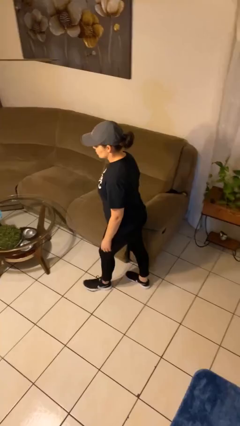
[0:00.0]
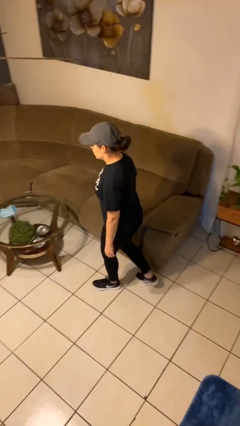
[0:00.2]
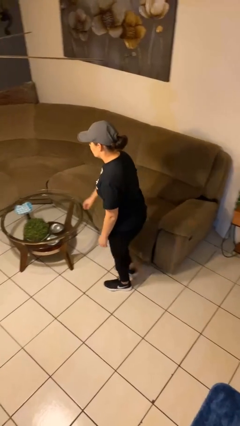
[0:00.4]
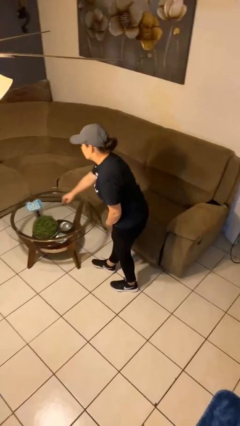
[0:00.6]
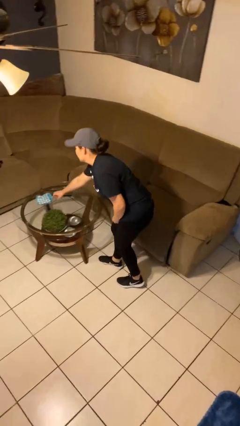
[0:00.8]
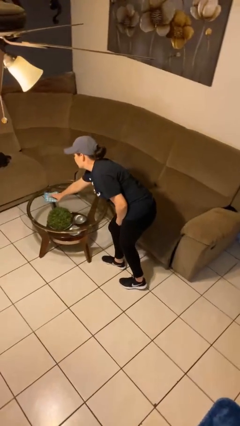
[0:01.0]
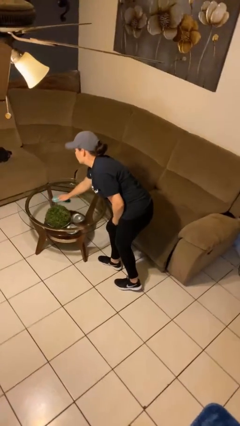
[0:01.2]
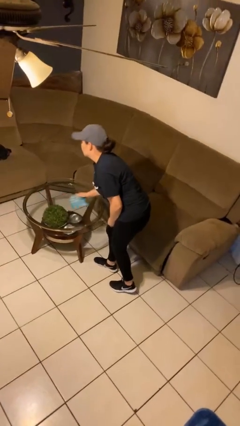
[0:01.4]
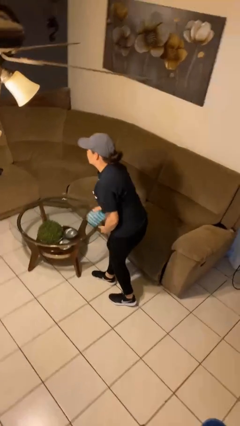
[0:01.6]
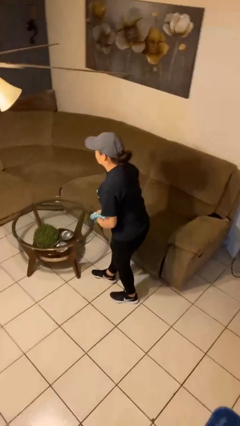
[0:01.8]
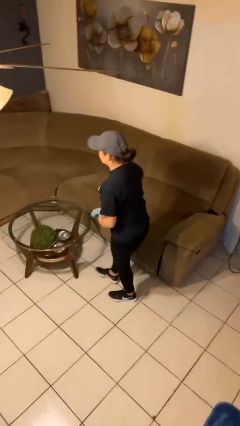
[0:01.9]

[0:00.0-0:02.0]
person picks up object from table

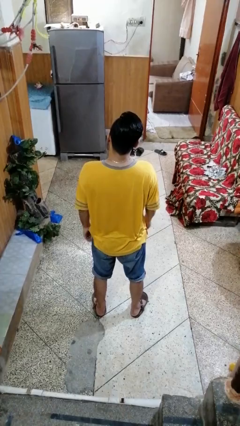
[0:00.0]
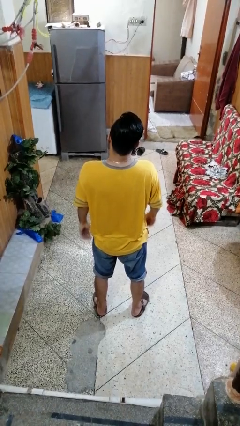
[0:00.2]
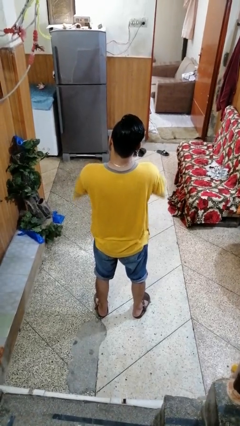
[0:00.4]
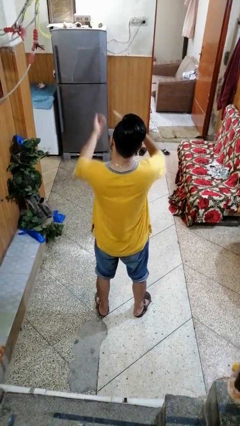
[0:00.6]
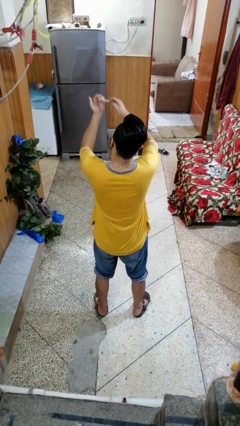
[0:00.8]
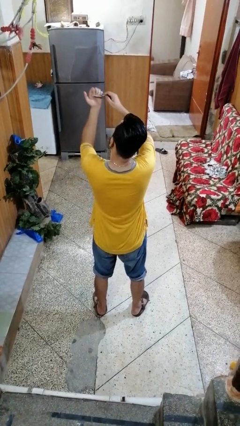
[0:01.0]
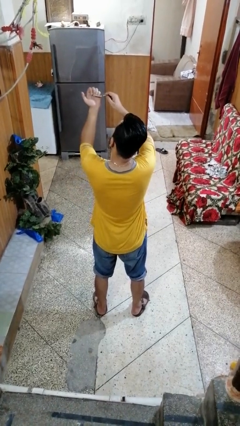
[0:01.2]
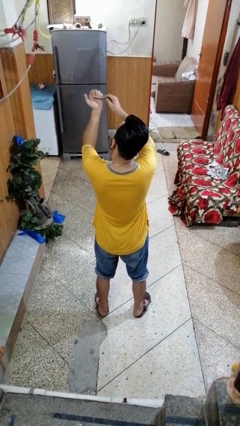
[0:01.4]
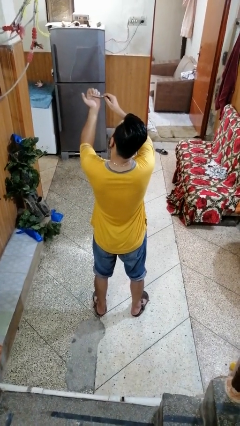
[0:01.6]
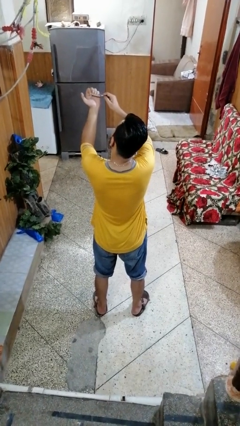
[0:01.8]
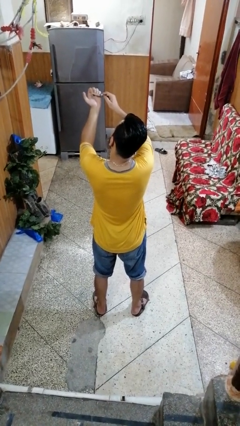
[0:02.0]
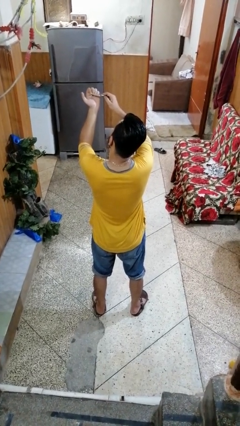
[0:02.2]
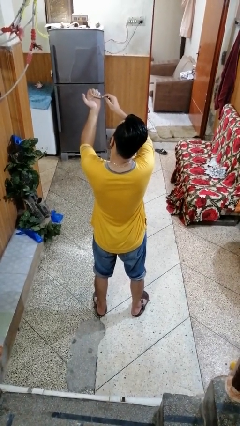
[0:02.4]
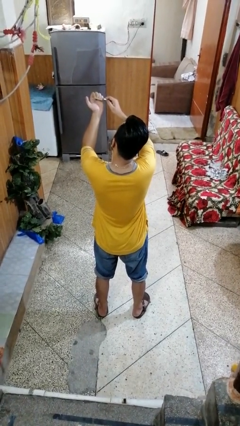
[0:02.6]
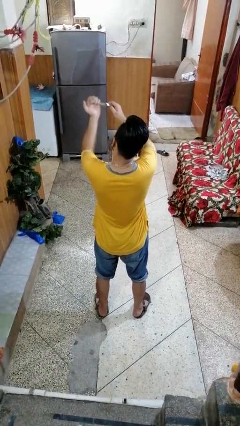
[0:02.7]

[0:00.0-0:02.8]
person files fingernails

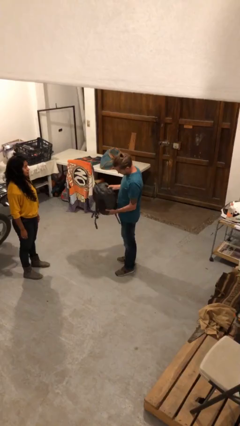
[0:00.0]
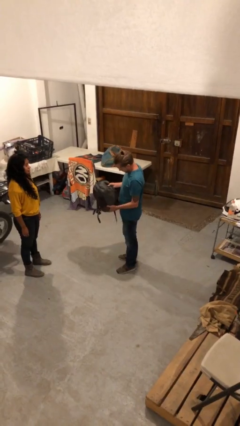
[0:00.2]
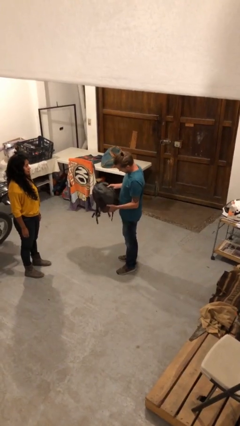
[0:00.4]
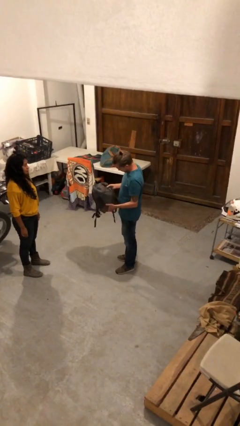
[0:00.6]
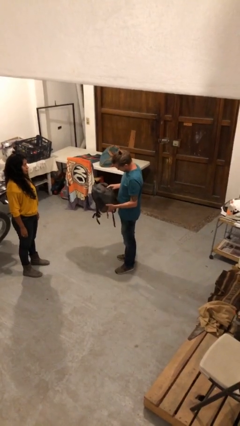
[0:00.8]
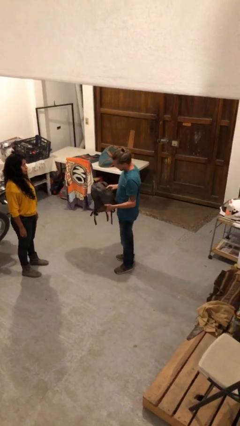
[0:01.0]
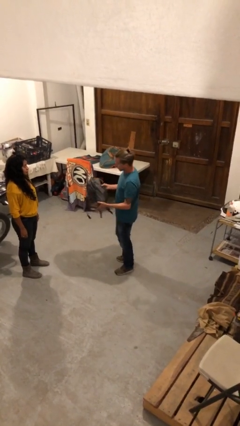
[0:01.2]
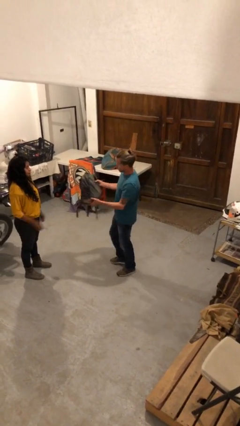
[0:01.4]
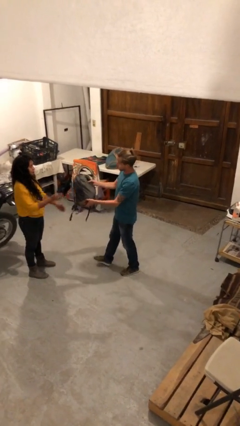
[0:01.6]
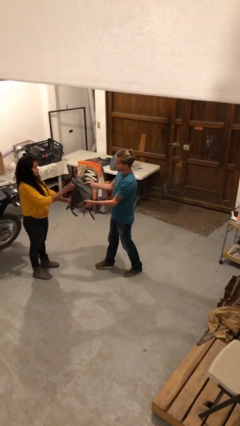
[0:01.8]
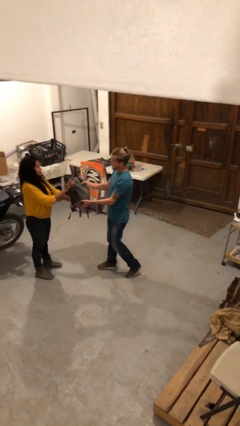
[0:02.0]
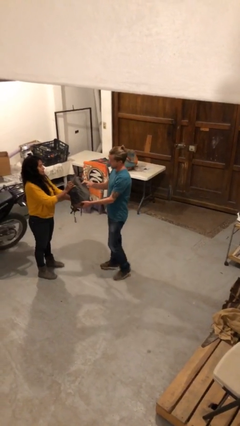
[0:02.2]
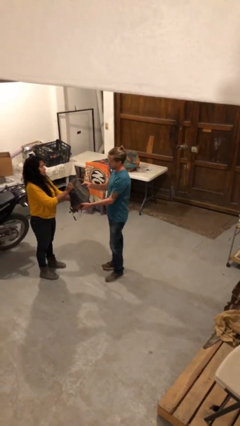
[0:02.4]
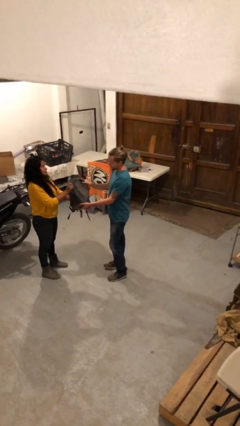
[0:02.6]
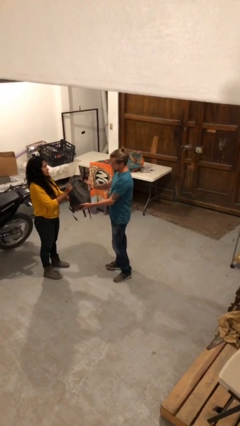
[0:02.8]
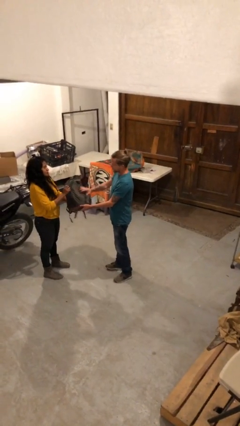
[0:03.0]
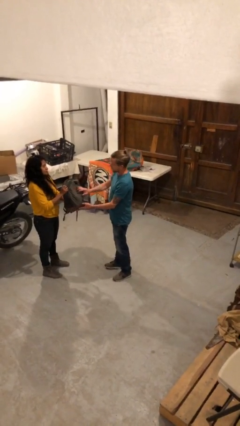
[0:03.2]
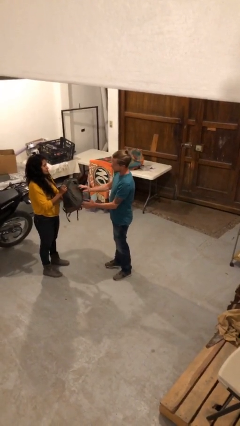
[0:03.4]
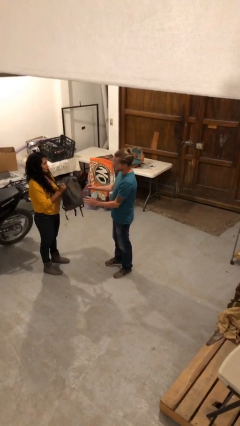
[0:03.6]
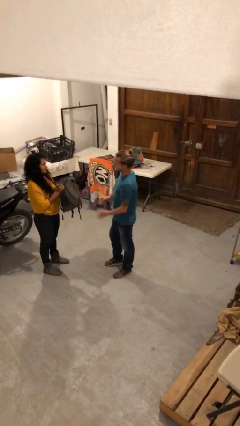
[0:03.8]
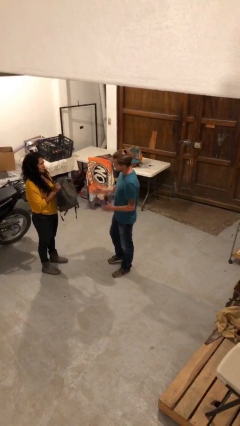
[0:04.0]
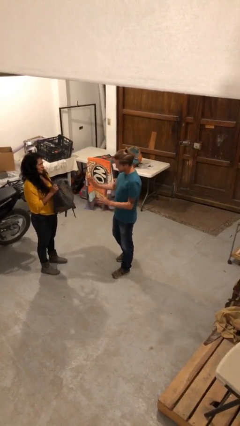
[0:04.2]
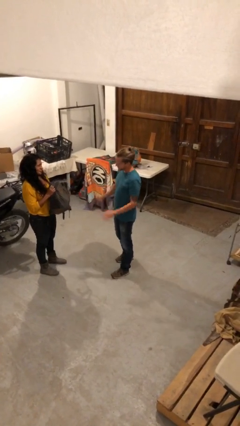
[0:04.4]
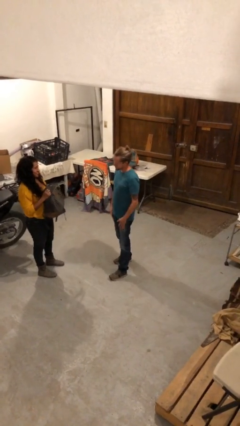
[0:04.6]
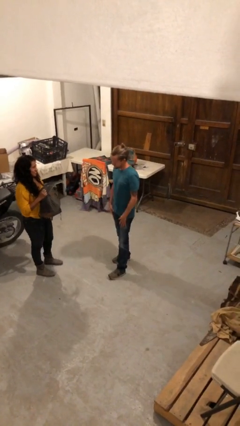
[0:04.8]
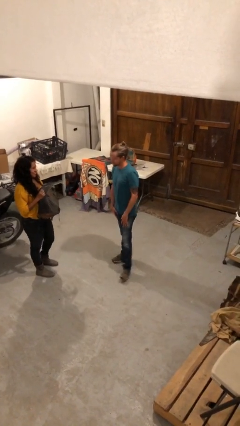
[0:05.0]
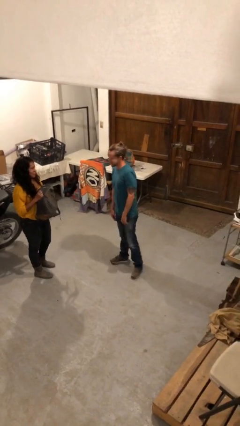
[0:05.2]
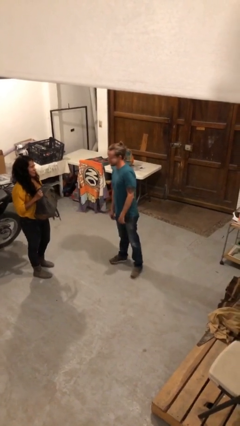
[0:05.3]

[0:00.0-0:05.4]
person transfers object to person

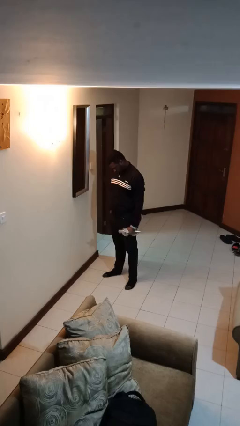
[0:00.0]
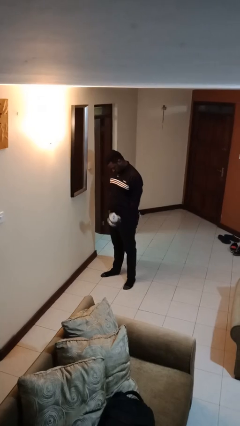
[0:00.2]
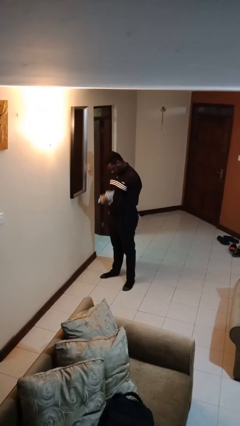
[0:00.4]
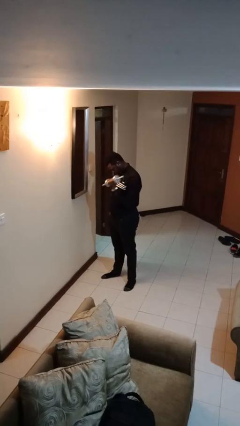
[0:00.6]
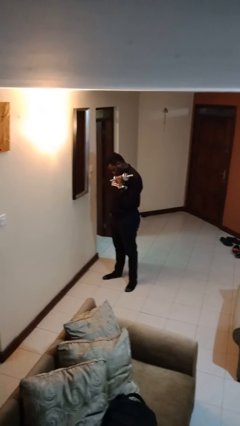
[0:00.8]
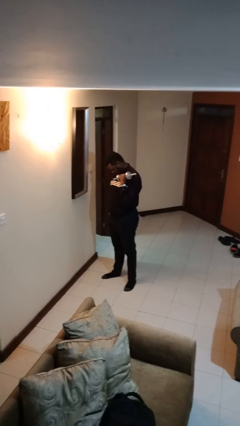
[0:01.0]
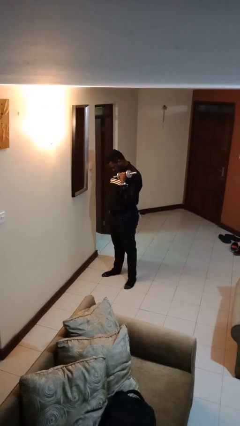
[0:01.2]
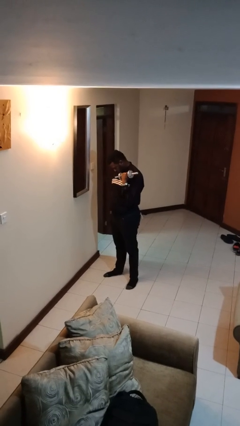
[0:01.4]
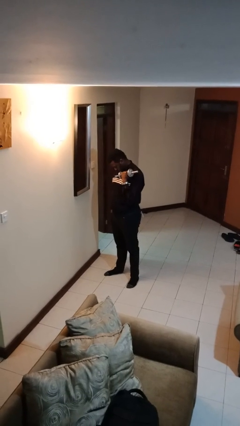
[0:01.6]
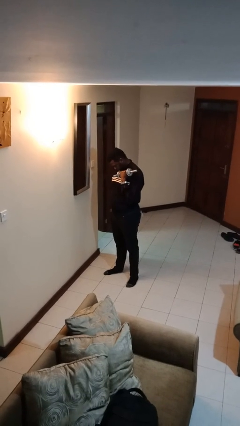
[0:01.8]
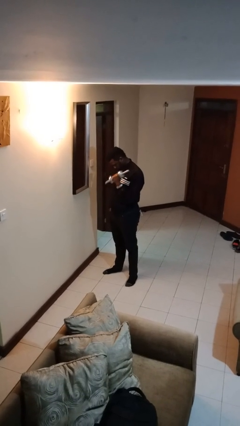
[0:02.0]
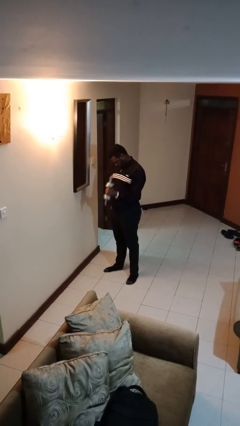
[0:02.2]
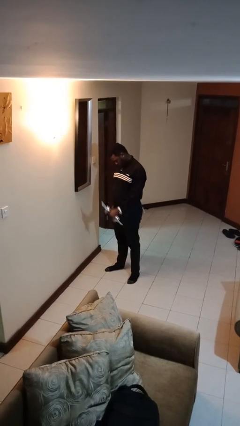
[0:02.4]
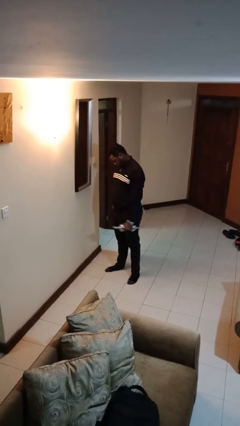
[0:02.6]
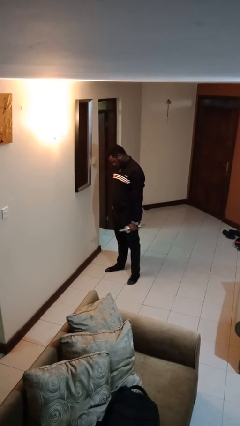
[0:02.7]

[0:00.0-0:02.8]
person lifts dumbbells

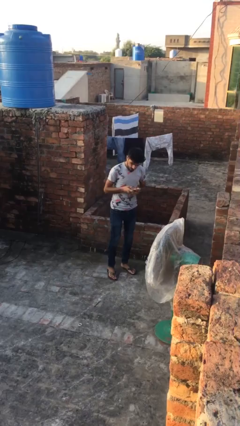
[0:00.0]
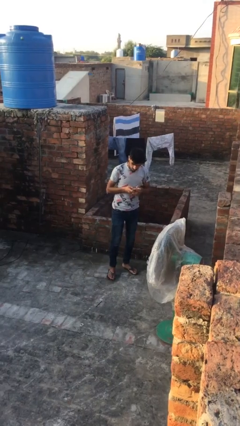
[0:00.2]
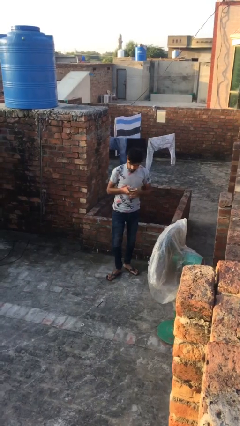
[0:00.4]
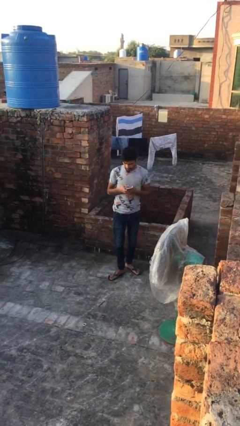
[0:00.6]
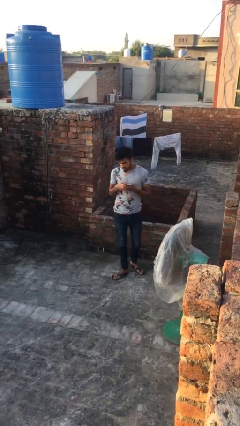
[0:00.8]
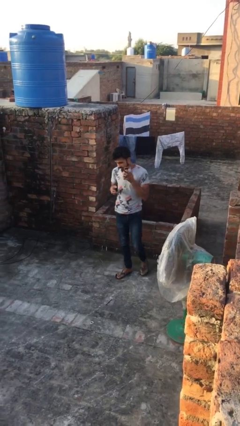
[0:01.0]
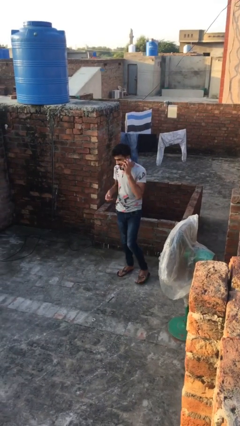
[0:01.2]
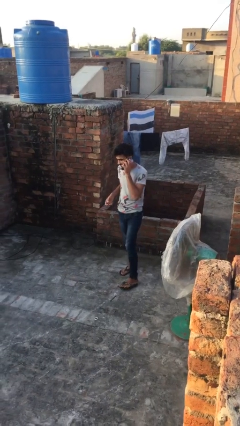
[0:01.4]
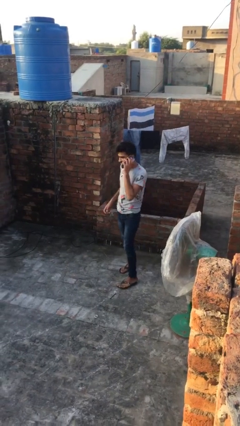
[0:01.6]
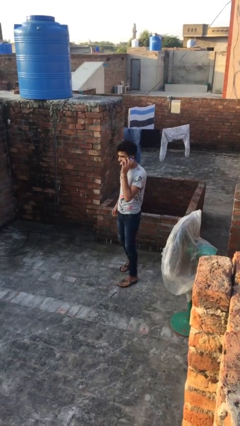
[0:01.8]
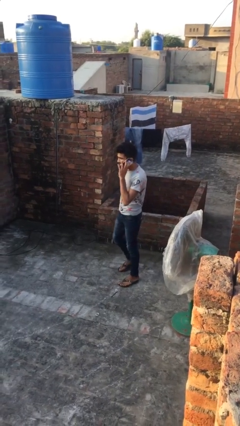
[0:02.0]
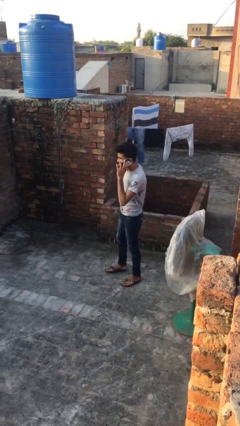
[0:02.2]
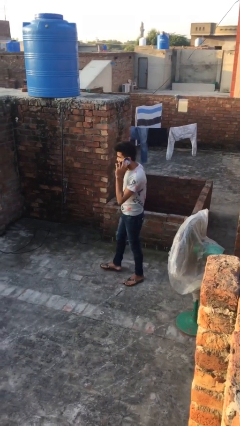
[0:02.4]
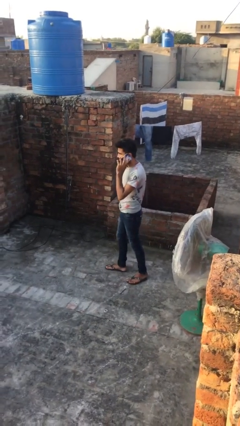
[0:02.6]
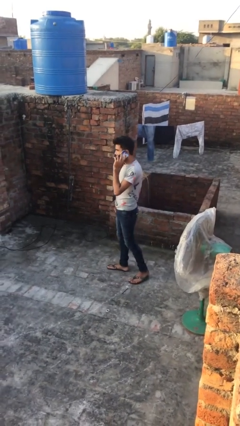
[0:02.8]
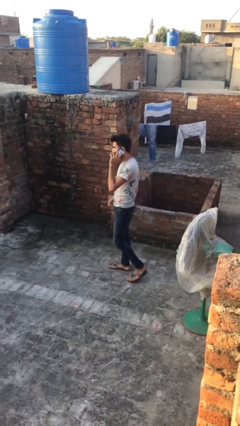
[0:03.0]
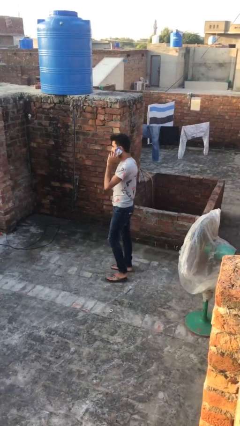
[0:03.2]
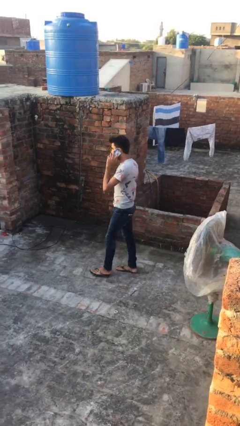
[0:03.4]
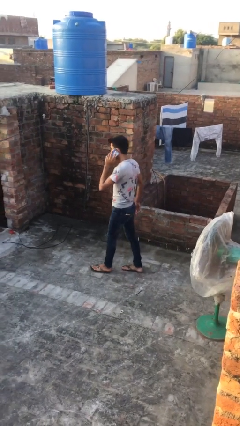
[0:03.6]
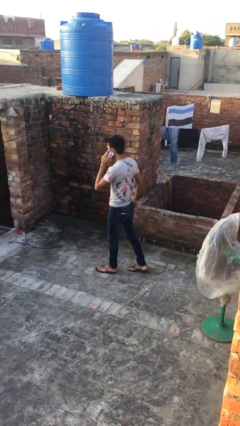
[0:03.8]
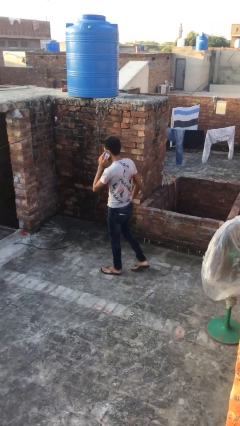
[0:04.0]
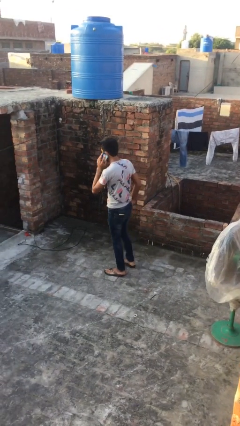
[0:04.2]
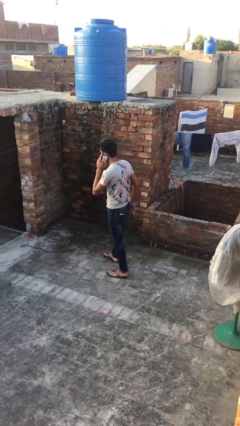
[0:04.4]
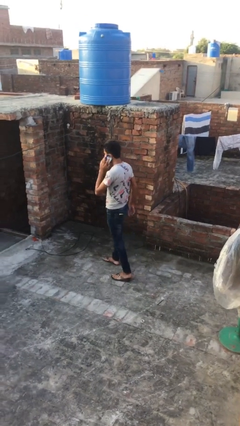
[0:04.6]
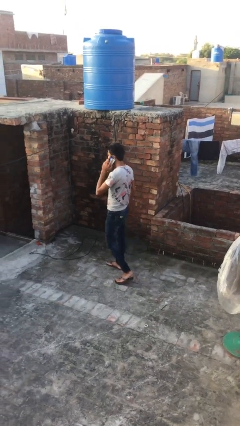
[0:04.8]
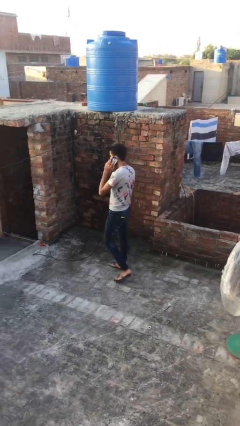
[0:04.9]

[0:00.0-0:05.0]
person talks on phone

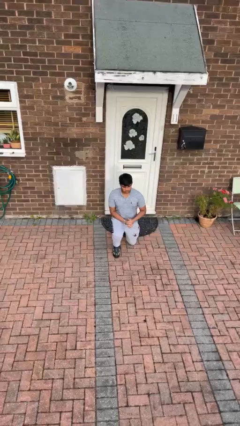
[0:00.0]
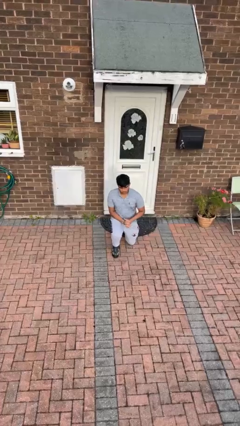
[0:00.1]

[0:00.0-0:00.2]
person stands up from floor
